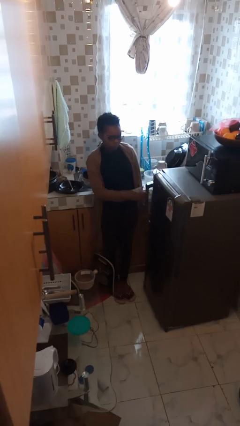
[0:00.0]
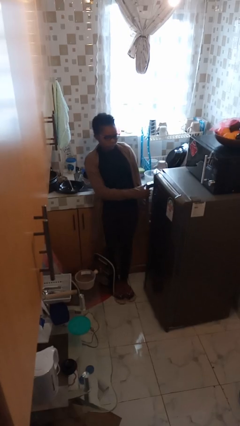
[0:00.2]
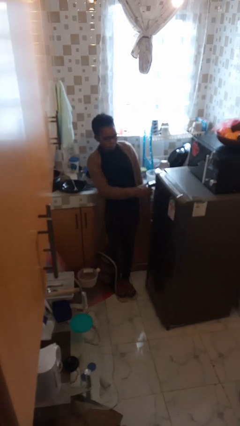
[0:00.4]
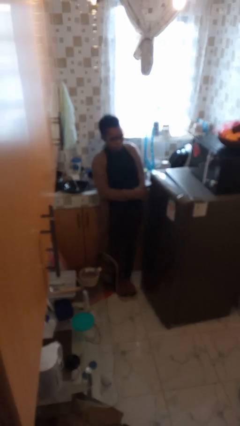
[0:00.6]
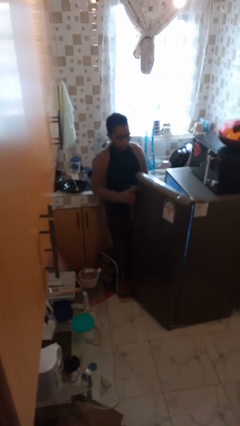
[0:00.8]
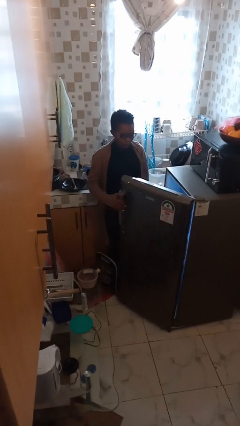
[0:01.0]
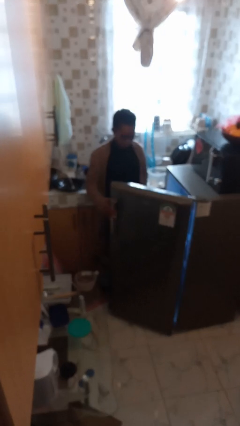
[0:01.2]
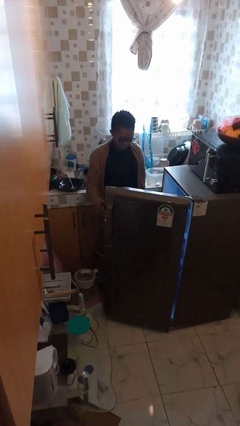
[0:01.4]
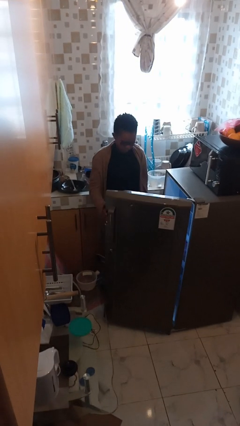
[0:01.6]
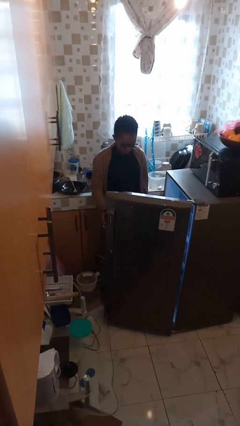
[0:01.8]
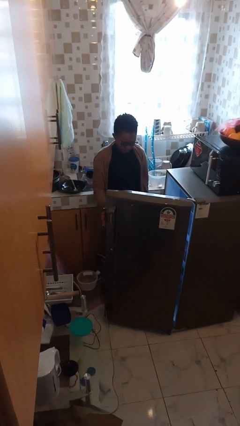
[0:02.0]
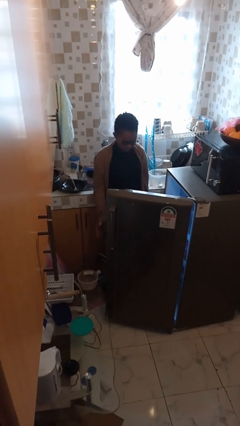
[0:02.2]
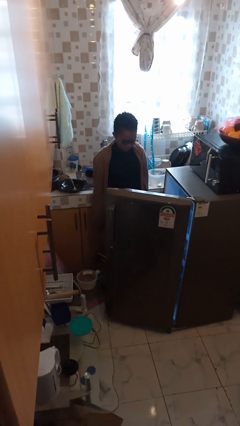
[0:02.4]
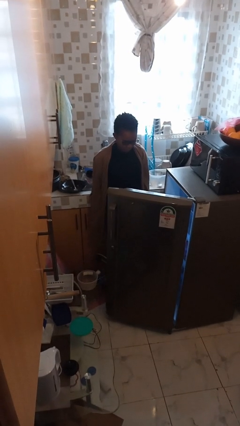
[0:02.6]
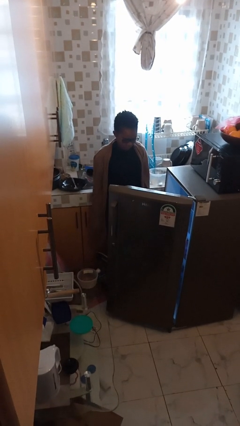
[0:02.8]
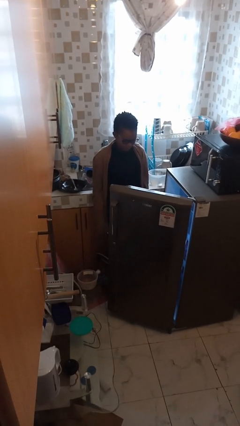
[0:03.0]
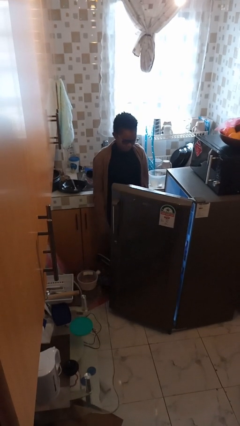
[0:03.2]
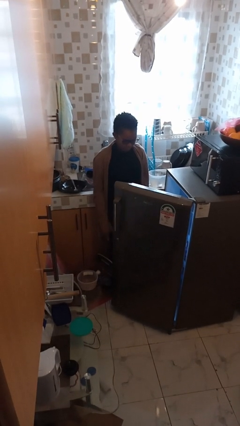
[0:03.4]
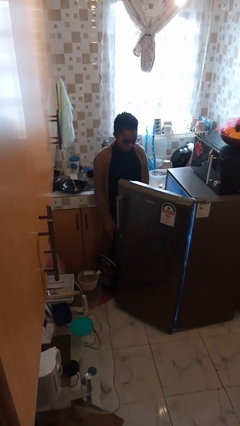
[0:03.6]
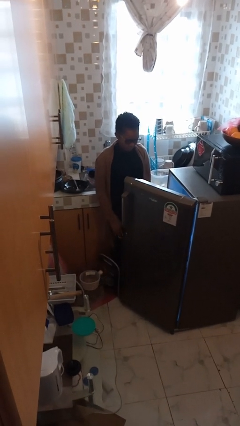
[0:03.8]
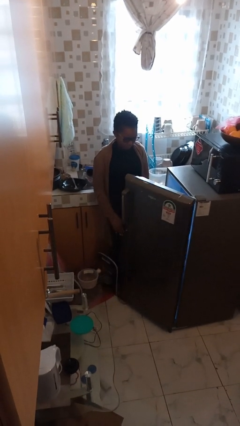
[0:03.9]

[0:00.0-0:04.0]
person opens refrigerator

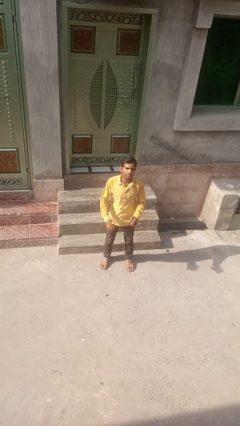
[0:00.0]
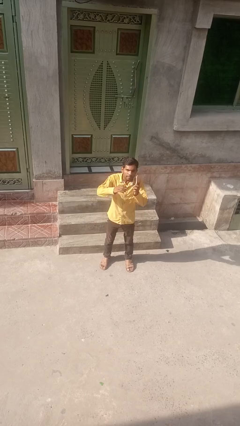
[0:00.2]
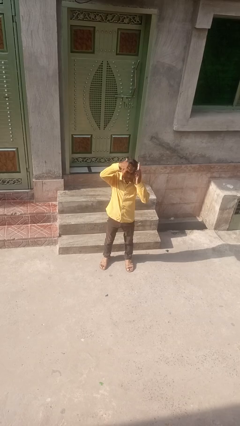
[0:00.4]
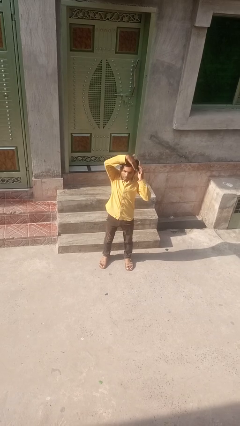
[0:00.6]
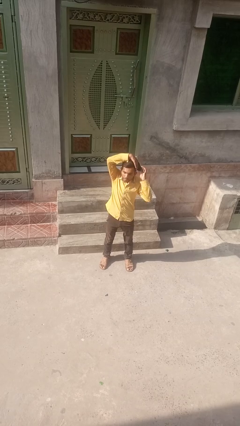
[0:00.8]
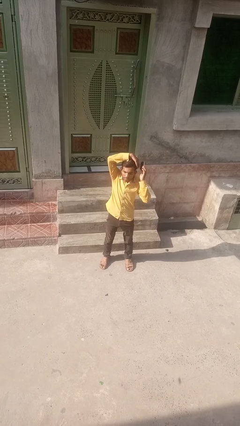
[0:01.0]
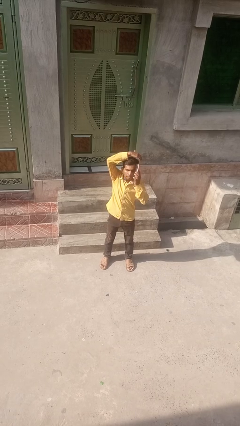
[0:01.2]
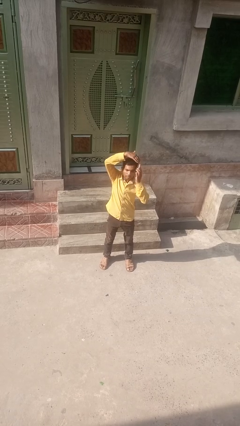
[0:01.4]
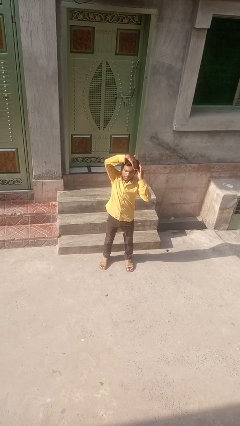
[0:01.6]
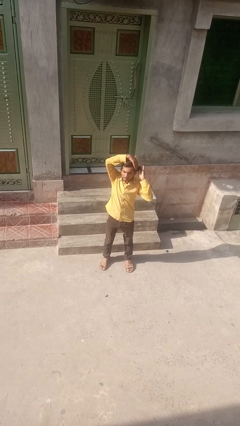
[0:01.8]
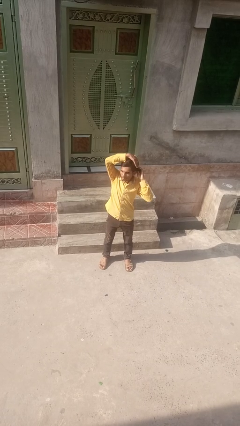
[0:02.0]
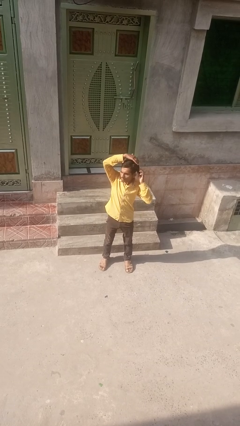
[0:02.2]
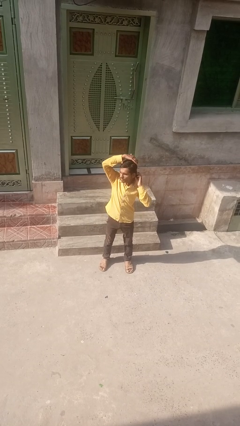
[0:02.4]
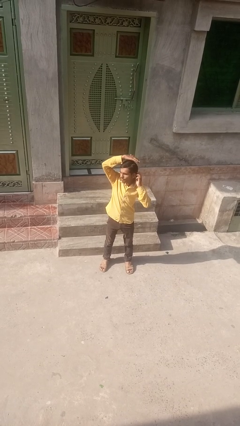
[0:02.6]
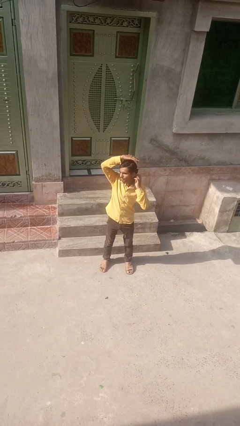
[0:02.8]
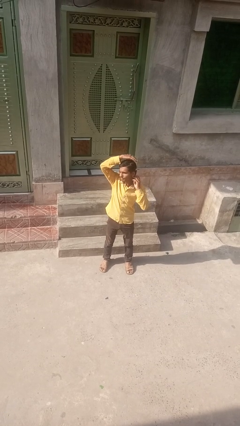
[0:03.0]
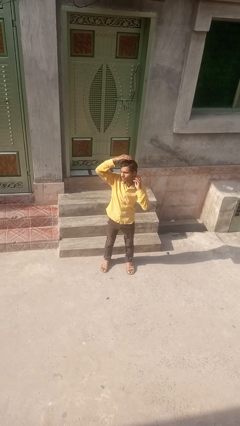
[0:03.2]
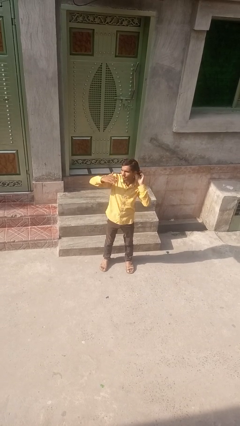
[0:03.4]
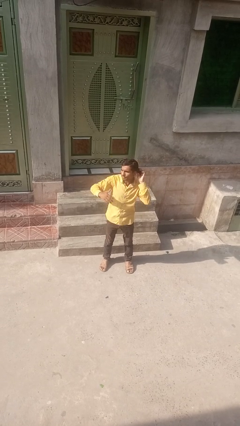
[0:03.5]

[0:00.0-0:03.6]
person brushes hair

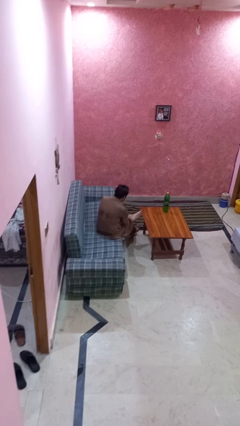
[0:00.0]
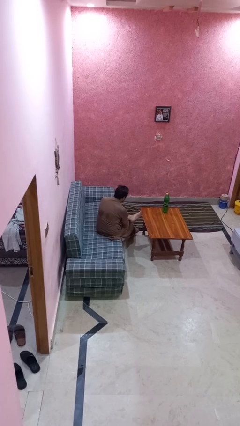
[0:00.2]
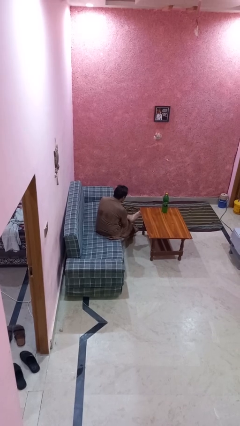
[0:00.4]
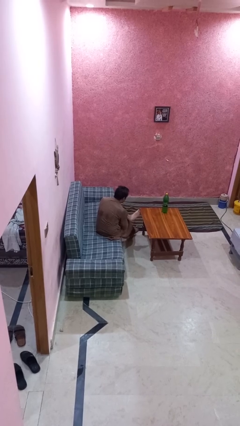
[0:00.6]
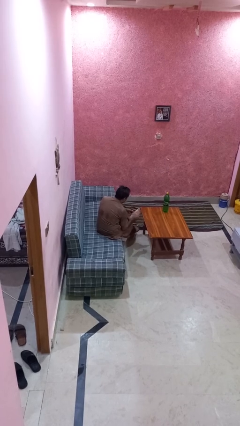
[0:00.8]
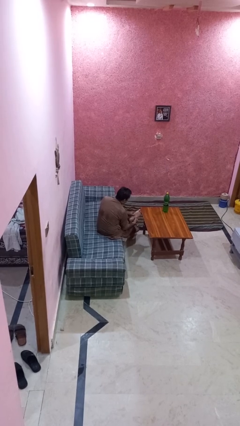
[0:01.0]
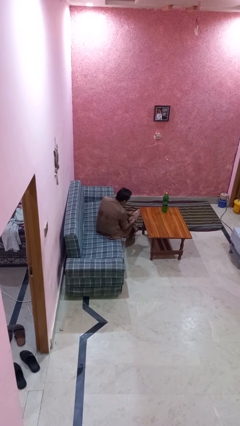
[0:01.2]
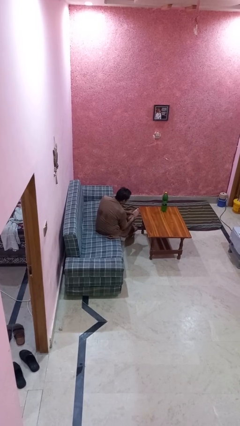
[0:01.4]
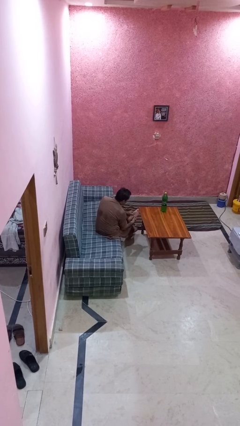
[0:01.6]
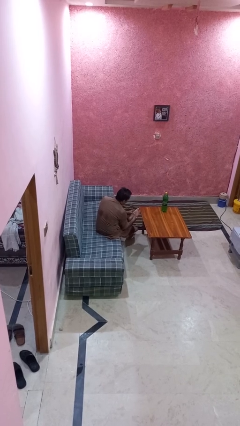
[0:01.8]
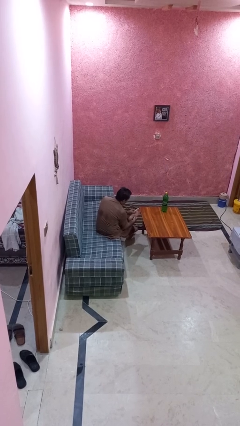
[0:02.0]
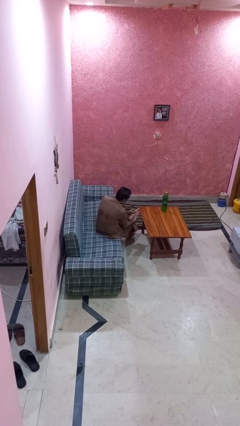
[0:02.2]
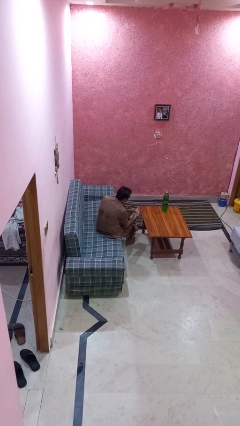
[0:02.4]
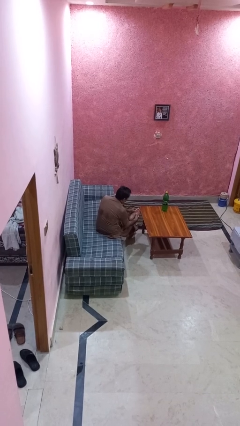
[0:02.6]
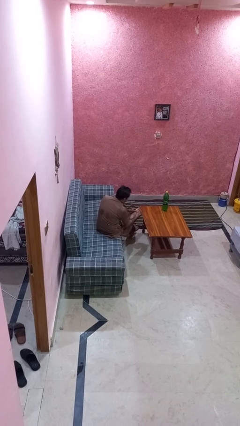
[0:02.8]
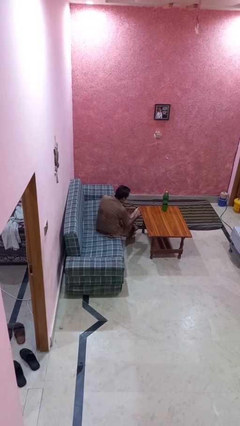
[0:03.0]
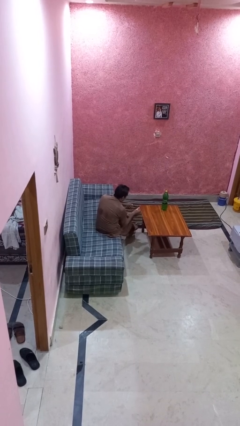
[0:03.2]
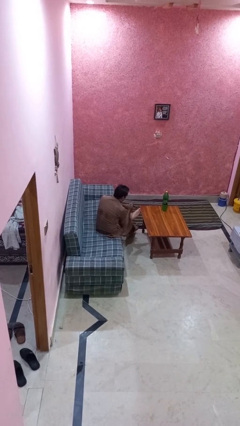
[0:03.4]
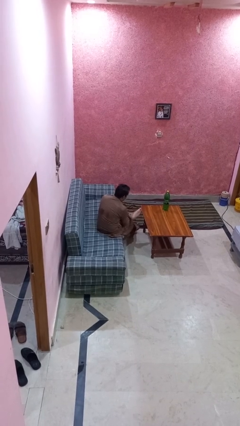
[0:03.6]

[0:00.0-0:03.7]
person rubs foot

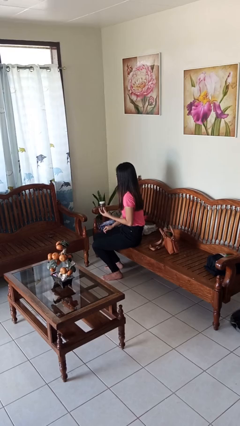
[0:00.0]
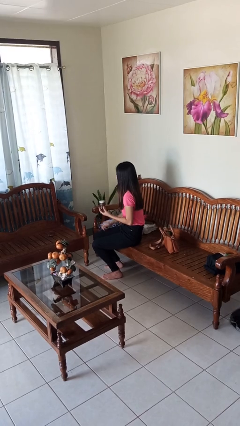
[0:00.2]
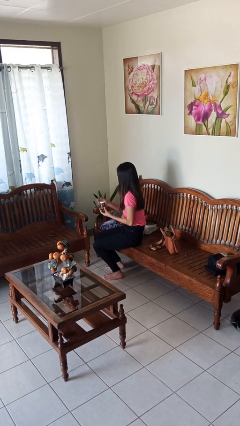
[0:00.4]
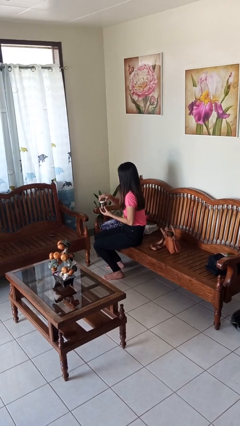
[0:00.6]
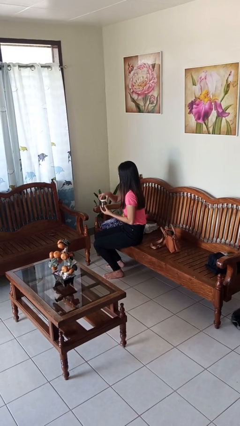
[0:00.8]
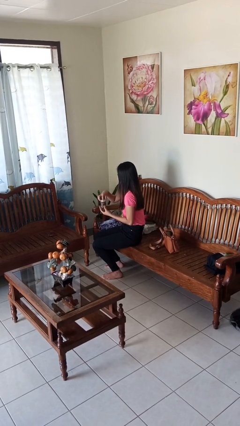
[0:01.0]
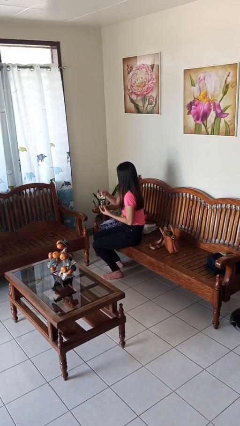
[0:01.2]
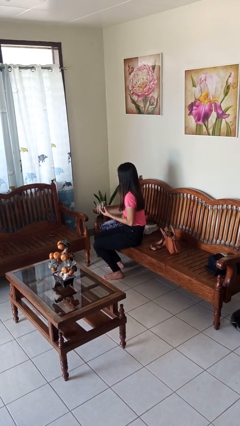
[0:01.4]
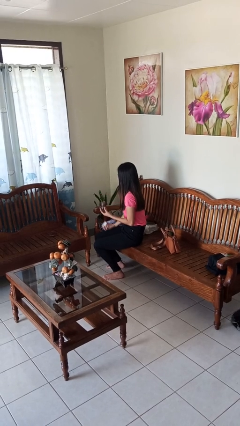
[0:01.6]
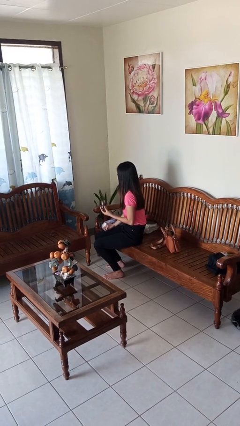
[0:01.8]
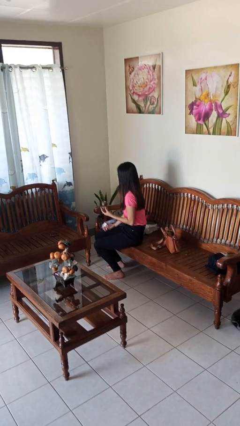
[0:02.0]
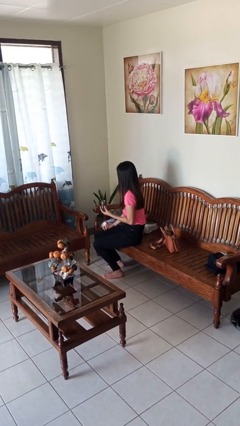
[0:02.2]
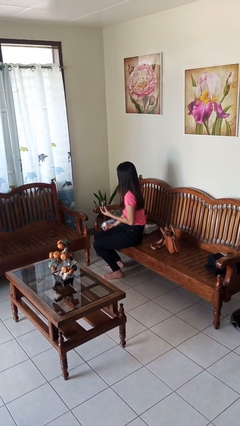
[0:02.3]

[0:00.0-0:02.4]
person opens jar

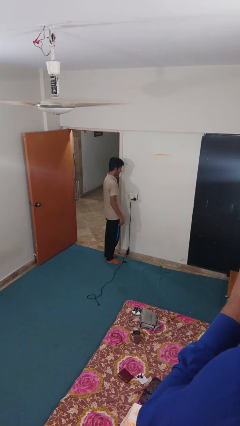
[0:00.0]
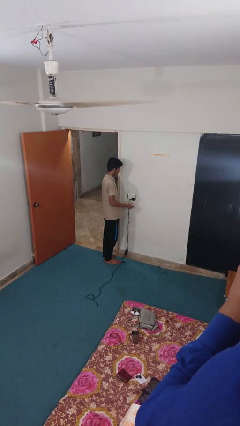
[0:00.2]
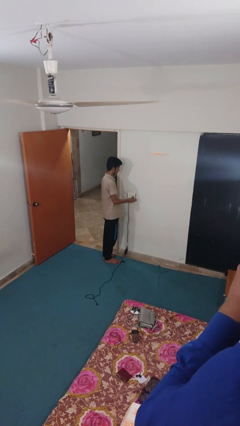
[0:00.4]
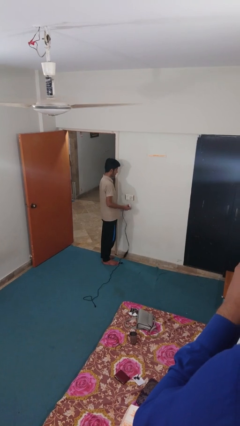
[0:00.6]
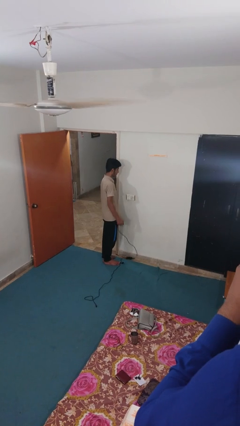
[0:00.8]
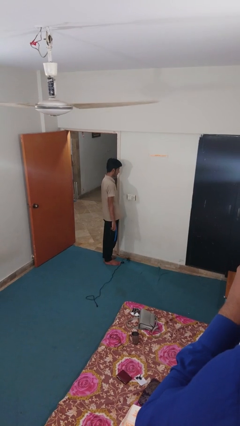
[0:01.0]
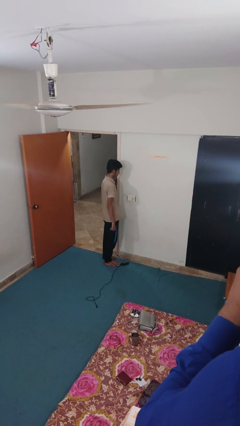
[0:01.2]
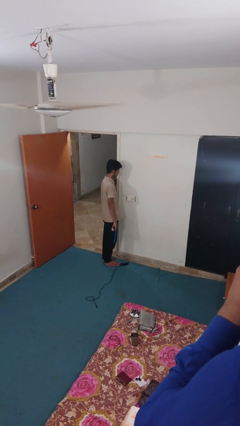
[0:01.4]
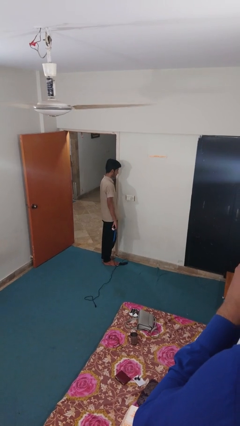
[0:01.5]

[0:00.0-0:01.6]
person unplugs from electrical socket

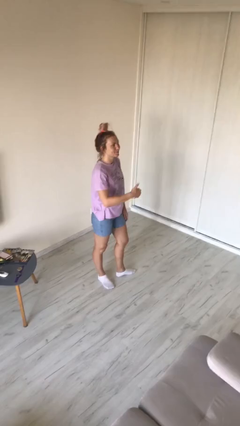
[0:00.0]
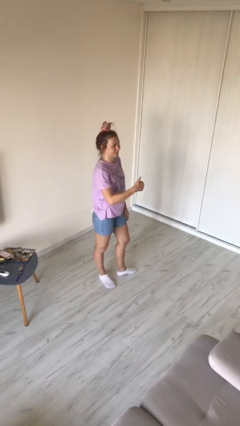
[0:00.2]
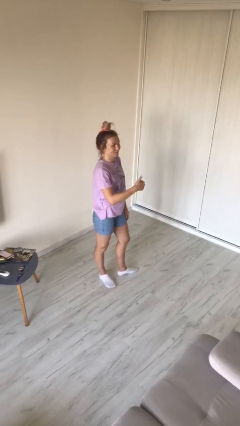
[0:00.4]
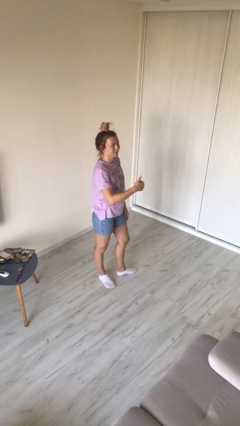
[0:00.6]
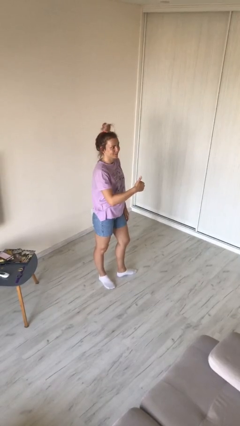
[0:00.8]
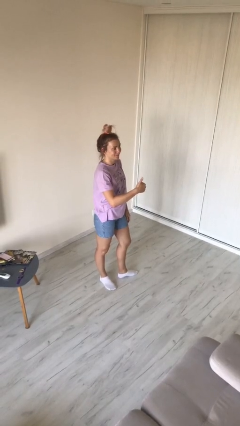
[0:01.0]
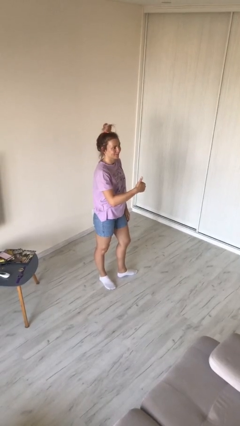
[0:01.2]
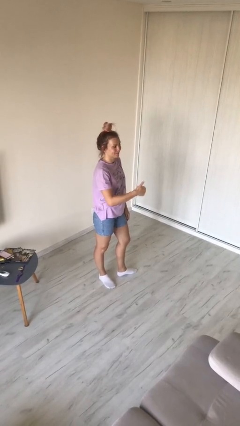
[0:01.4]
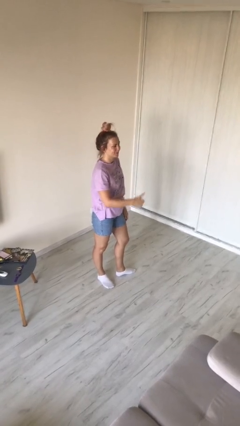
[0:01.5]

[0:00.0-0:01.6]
person gestures thumbs up

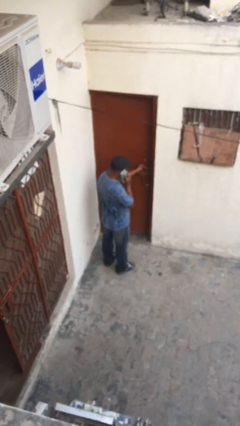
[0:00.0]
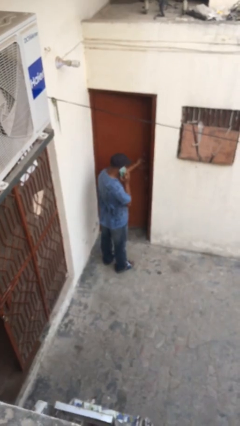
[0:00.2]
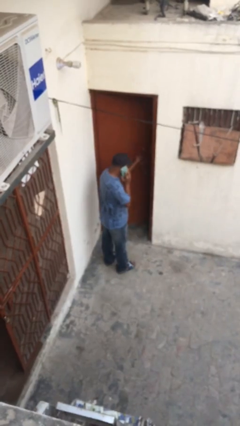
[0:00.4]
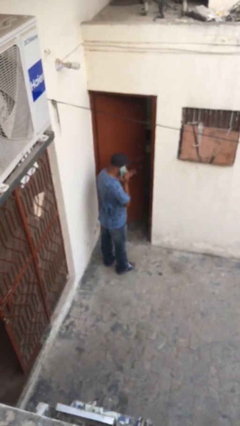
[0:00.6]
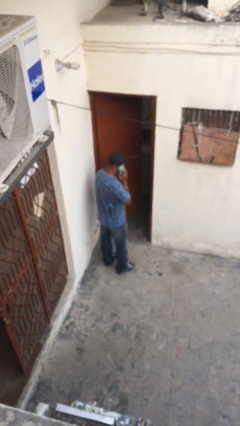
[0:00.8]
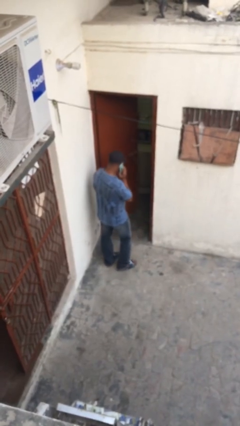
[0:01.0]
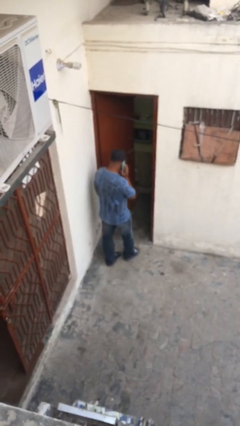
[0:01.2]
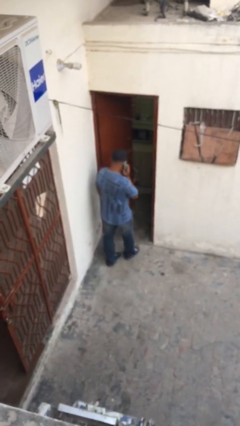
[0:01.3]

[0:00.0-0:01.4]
person opens facility door
